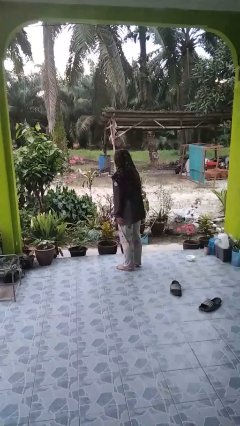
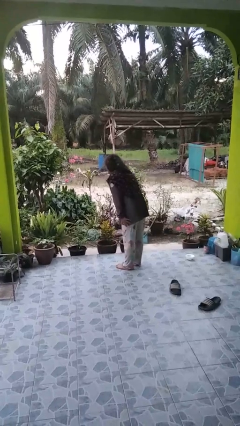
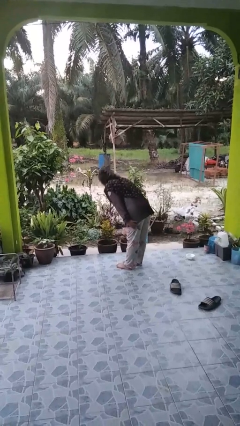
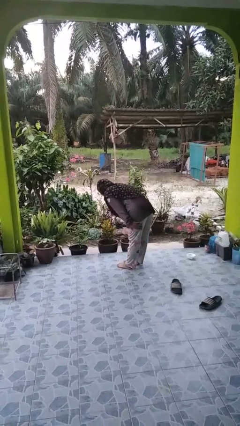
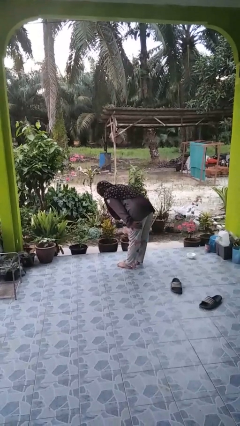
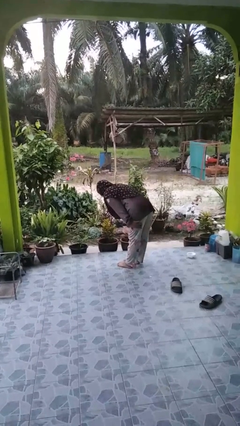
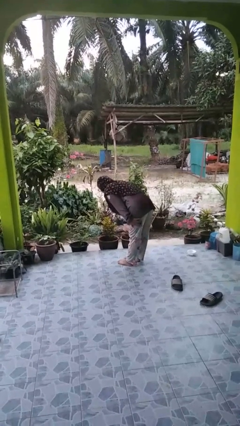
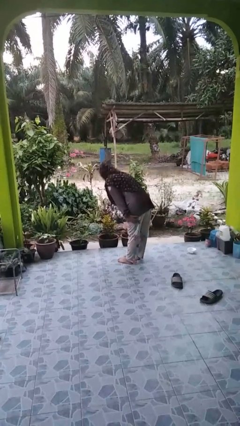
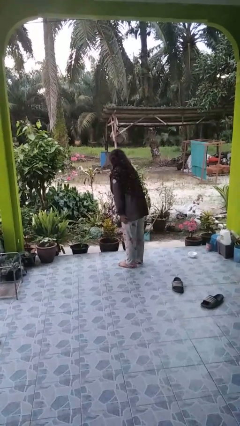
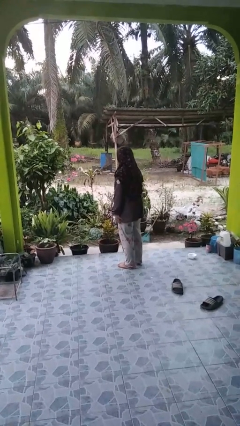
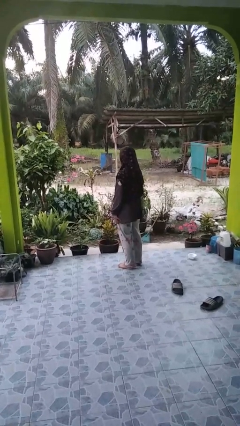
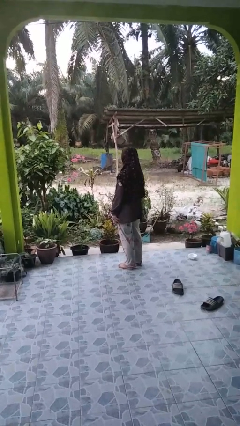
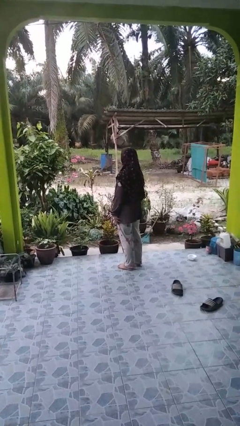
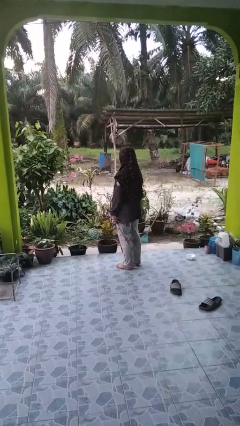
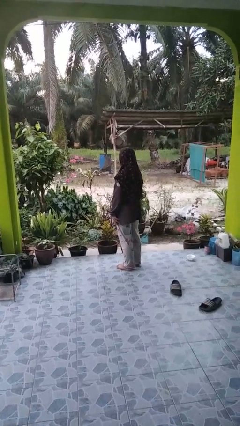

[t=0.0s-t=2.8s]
person bows

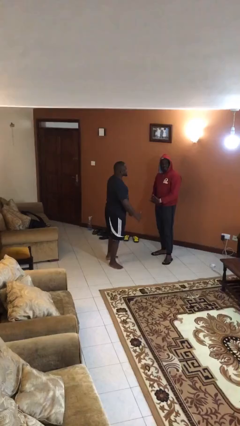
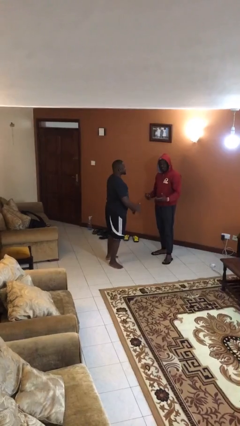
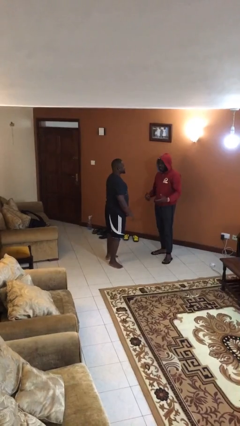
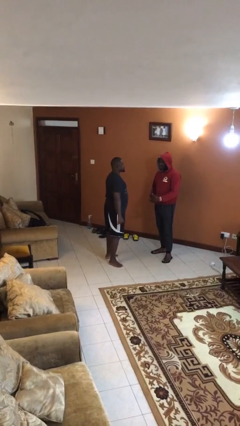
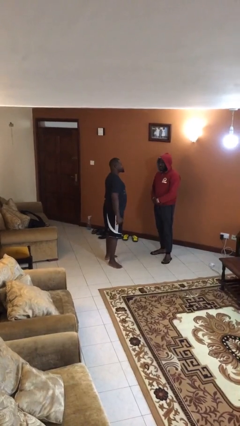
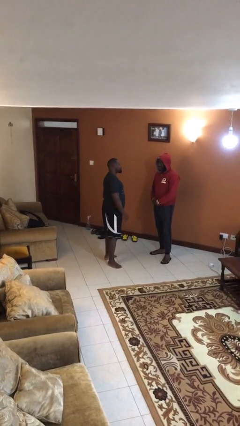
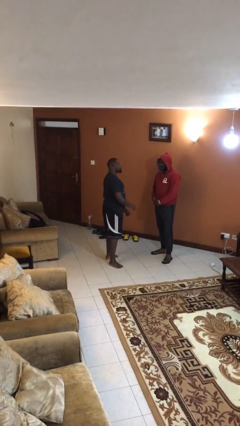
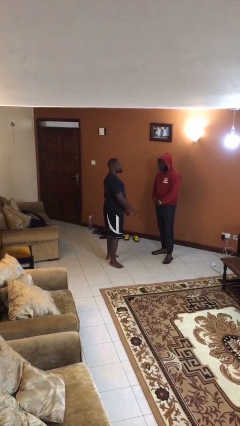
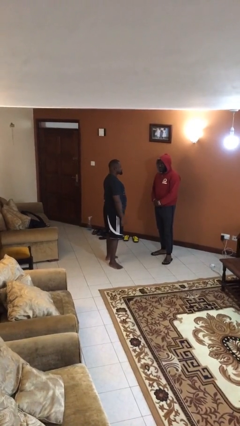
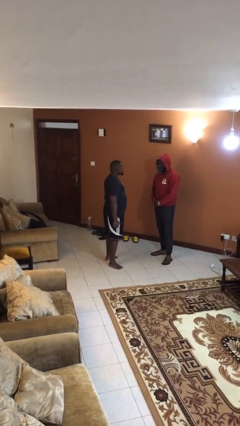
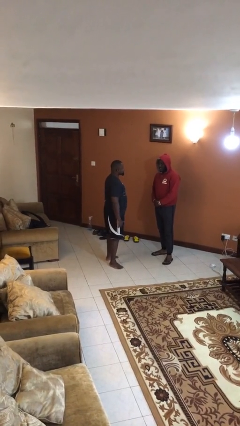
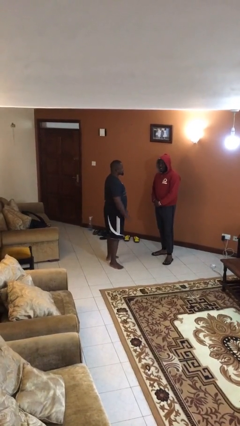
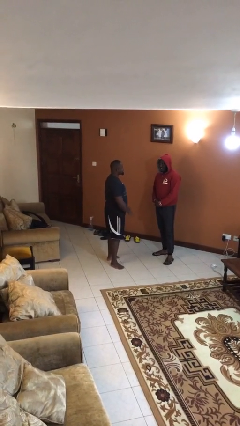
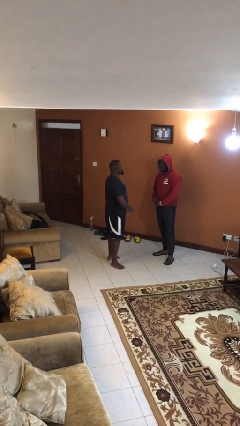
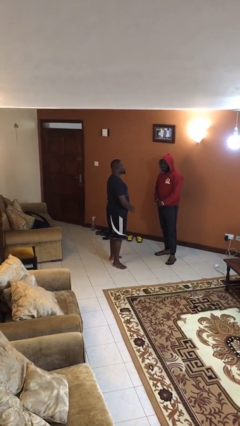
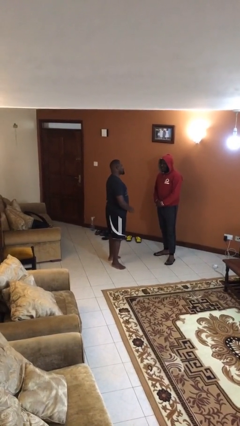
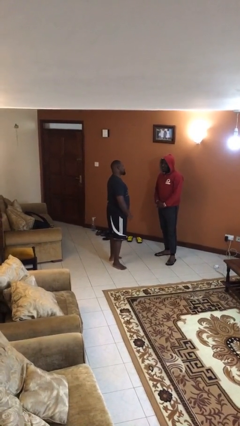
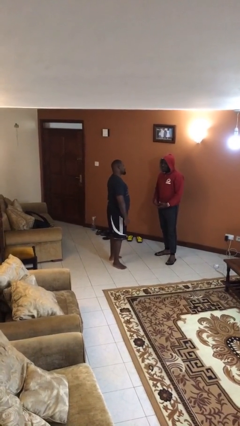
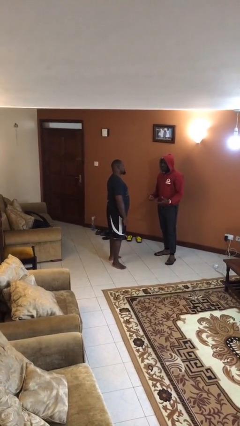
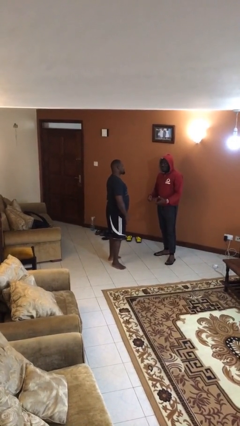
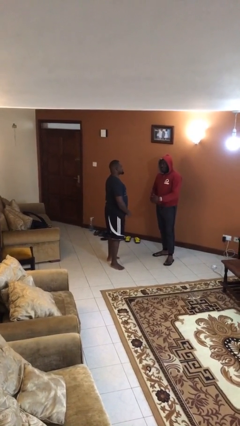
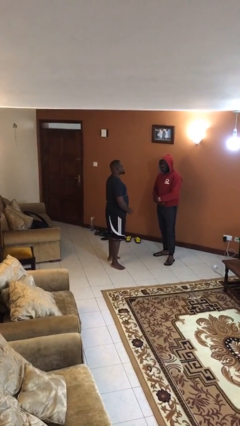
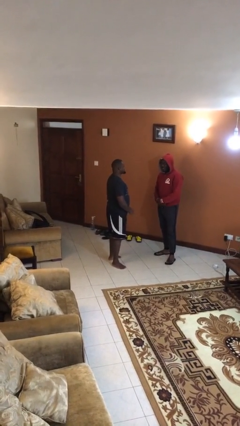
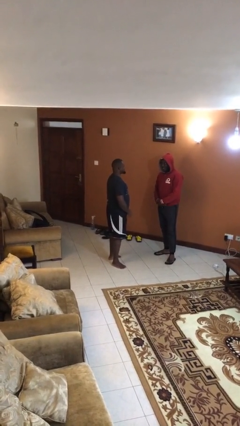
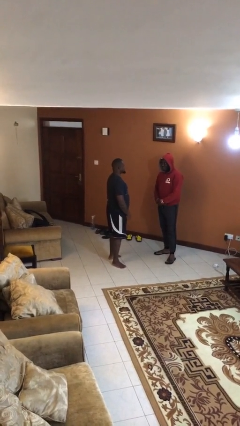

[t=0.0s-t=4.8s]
person talks to person

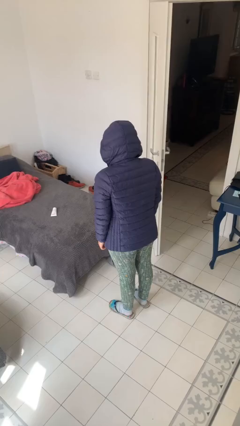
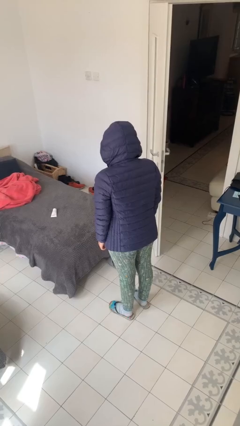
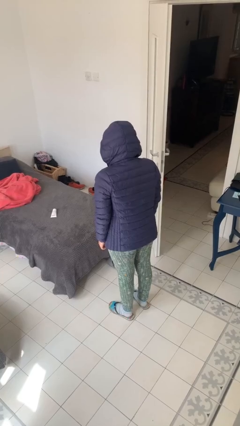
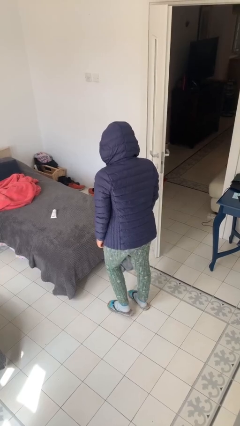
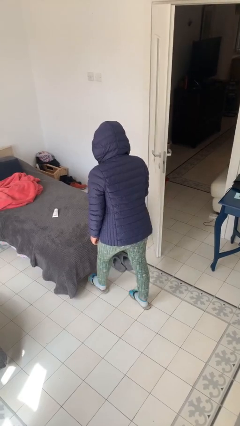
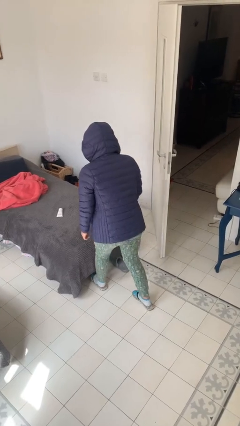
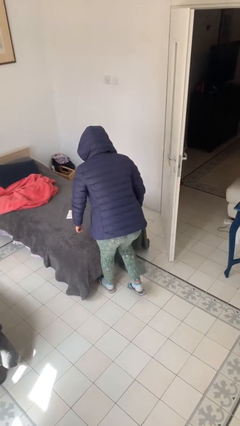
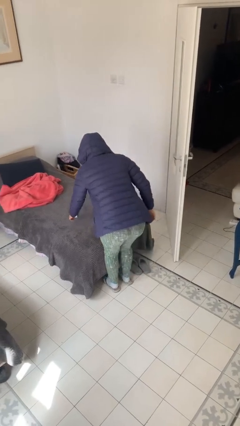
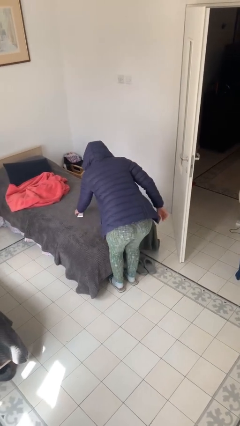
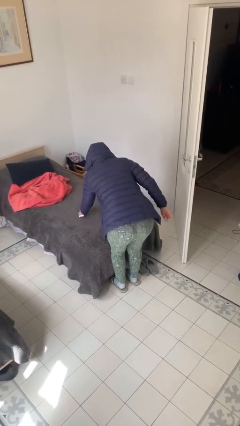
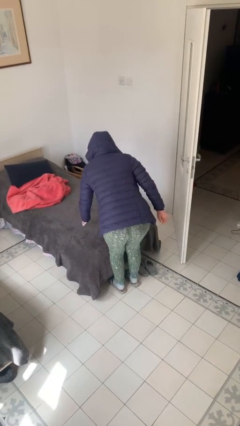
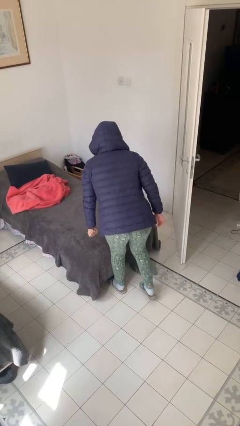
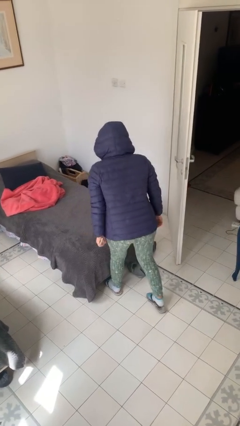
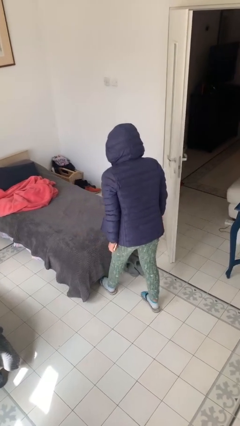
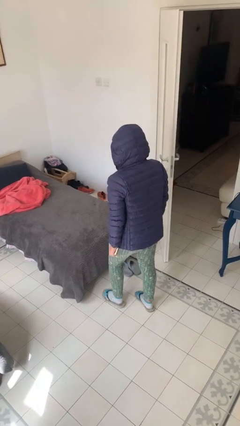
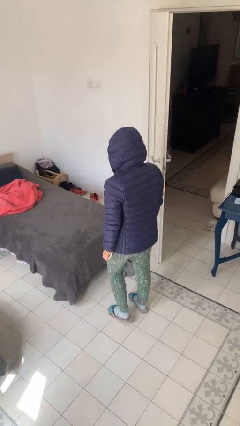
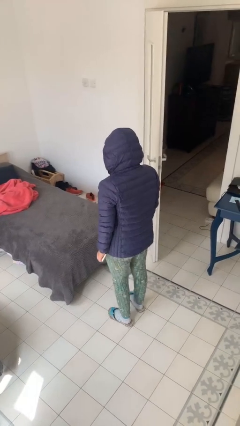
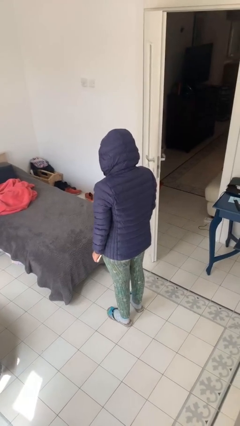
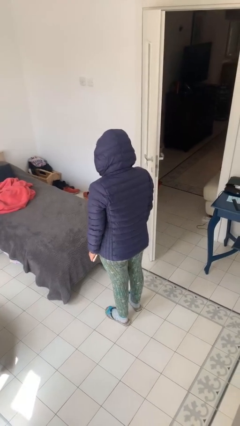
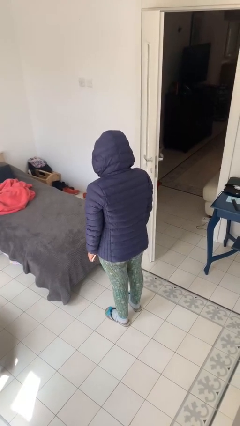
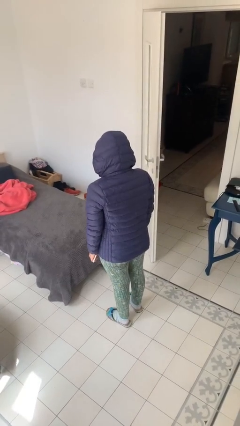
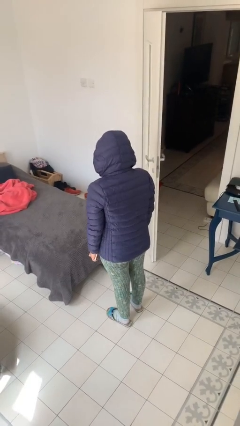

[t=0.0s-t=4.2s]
person picks up object from bed

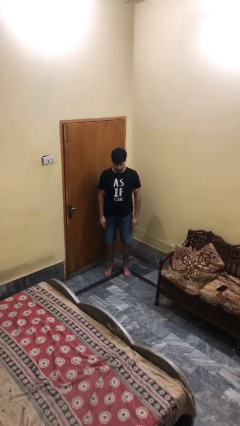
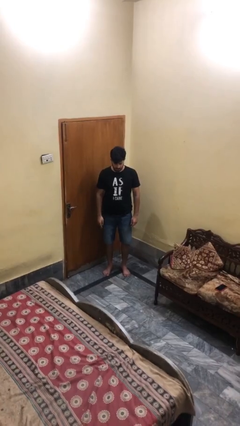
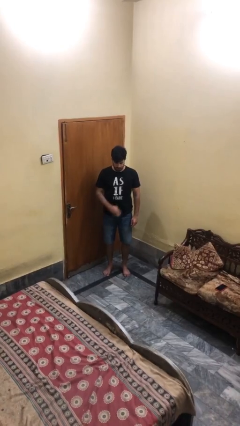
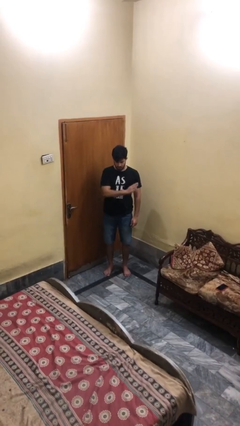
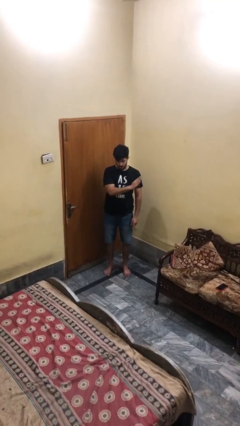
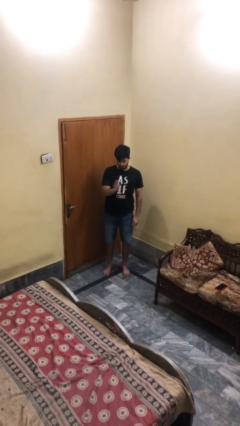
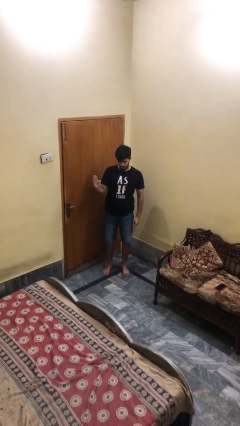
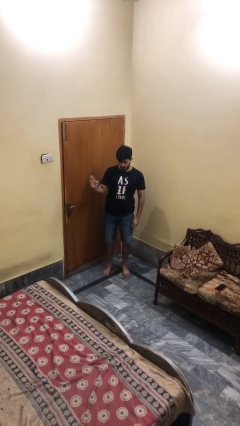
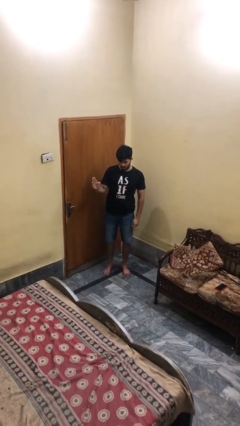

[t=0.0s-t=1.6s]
person gestures swipe right

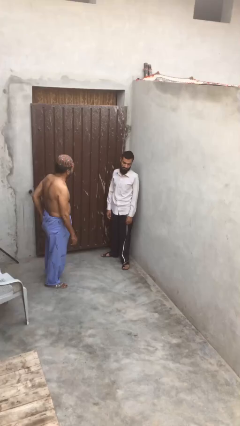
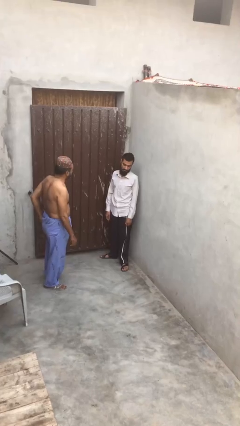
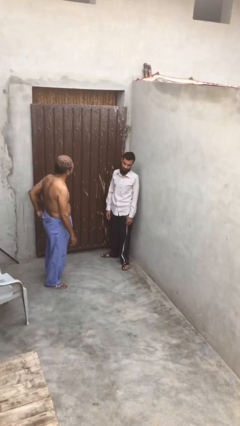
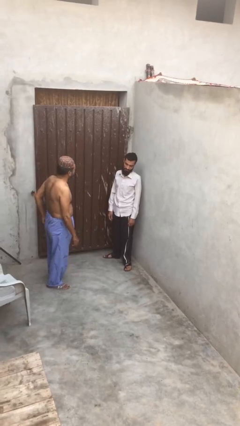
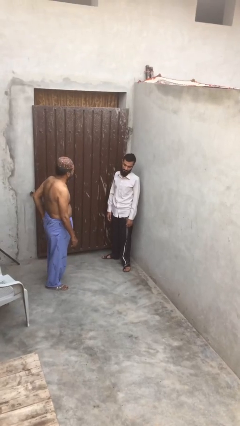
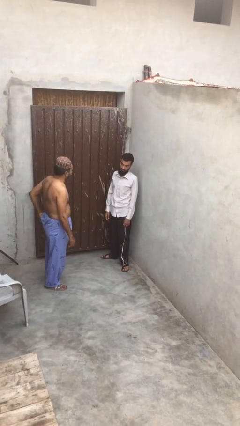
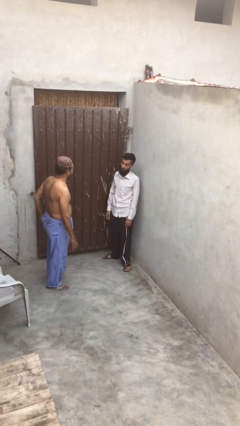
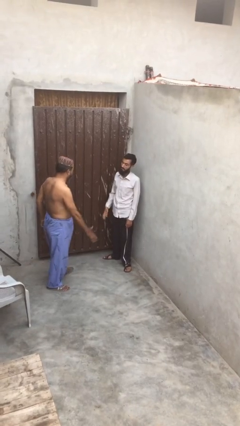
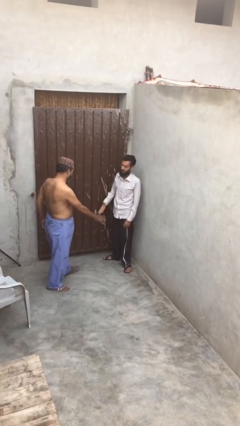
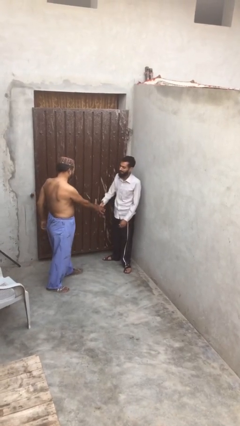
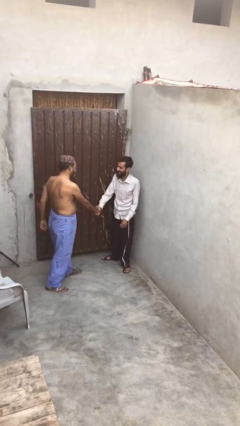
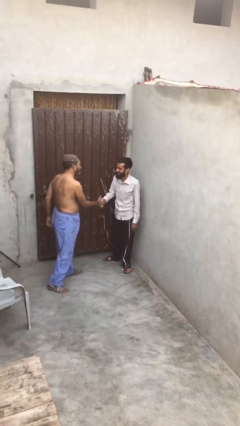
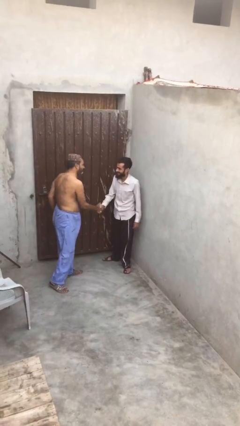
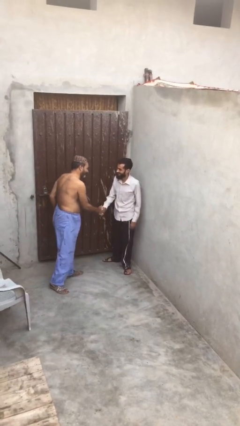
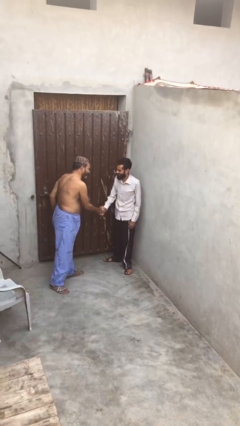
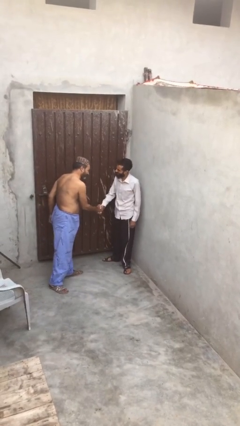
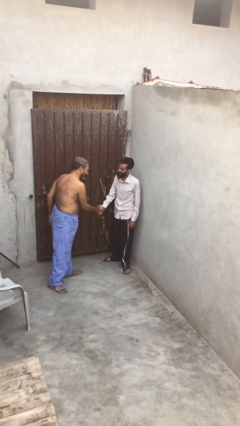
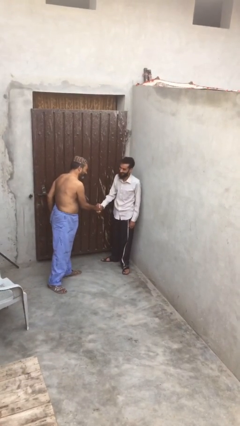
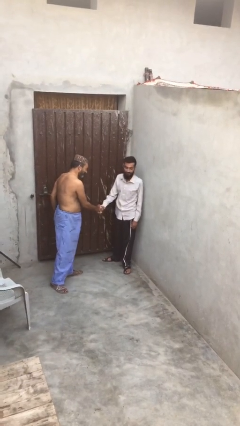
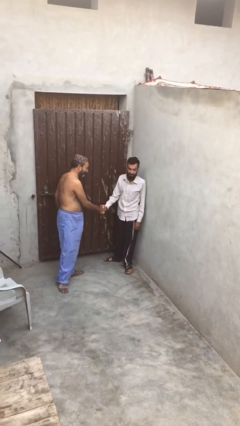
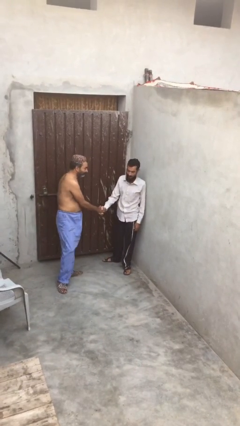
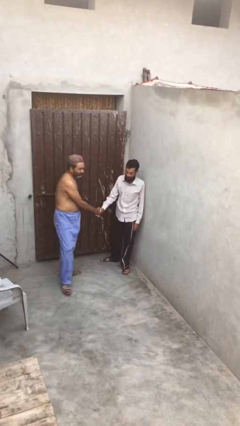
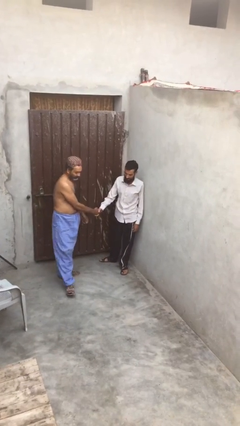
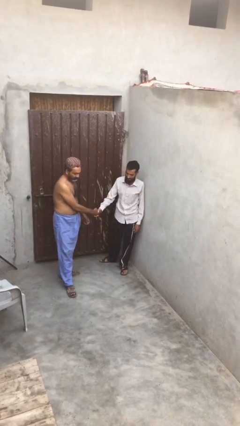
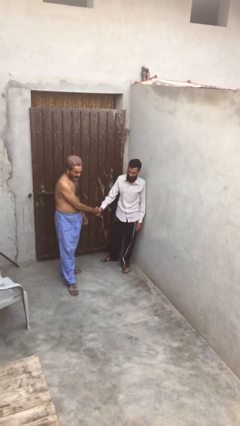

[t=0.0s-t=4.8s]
person shakes hand
